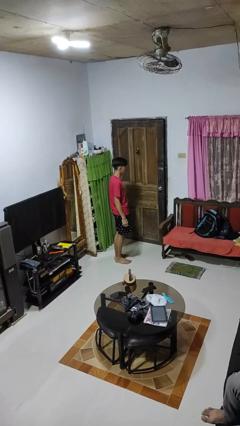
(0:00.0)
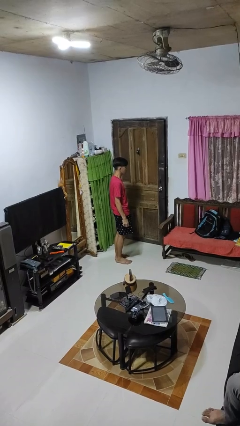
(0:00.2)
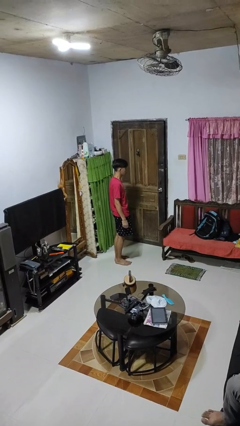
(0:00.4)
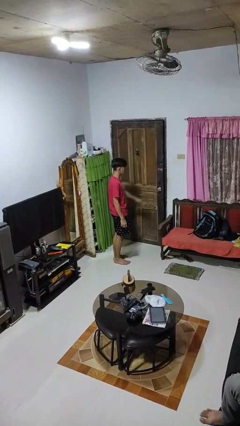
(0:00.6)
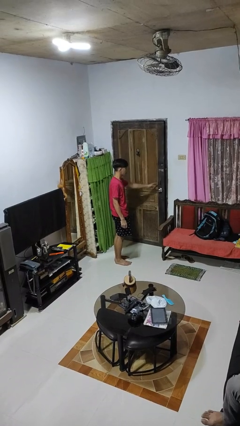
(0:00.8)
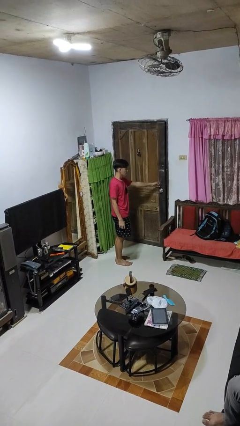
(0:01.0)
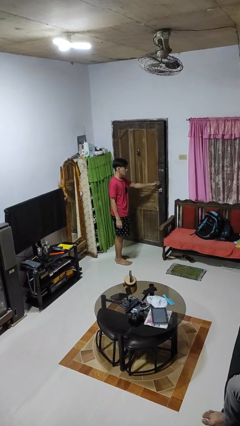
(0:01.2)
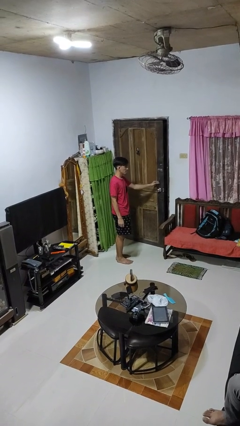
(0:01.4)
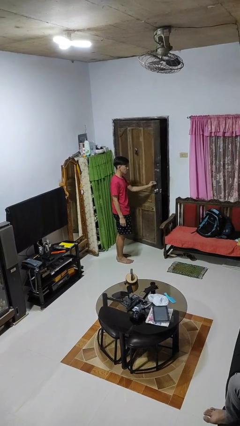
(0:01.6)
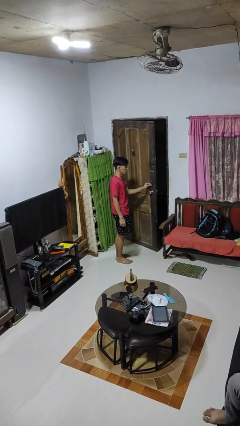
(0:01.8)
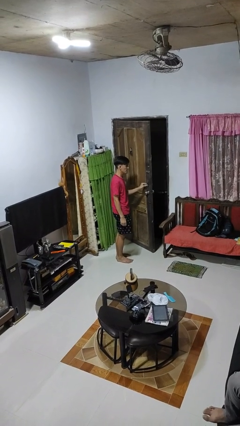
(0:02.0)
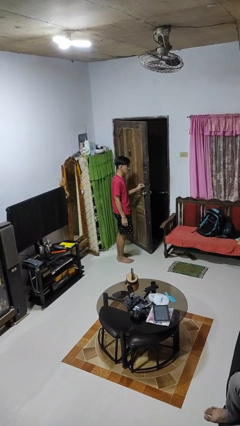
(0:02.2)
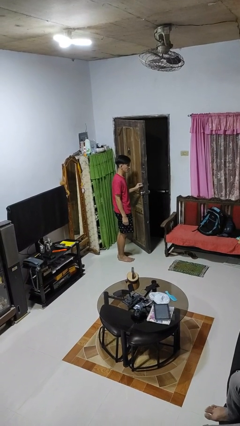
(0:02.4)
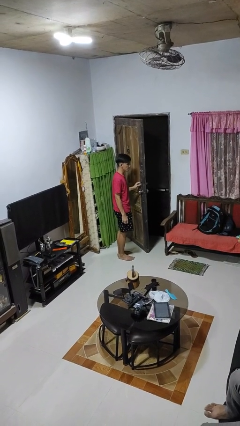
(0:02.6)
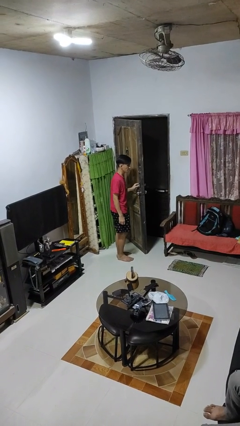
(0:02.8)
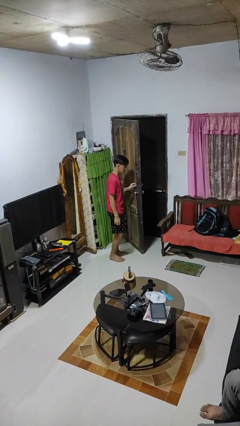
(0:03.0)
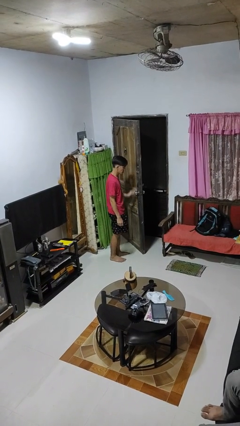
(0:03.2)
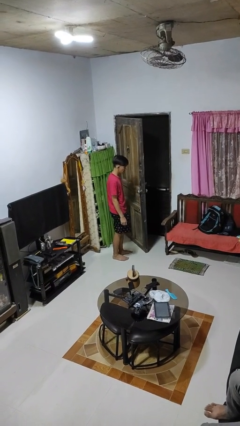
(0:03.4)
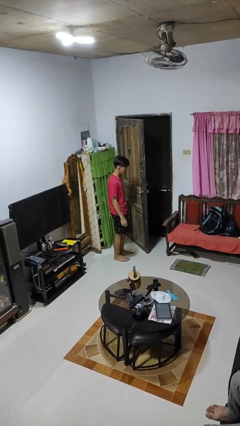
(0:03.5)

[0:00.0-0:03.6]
person opens facility door

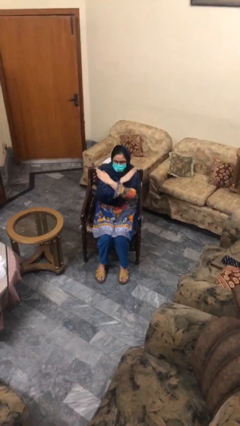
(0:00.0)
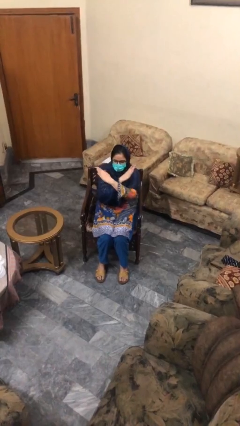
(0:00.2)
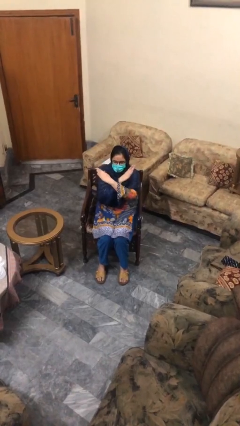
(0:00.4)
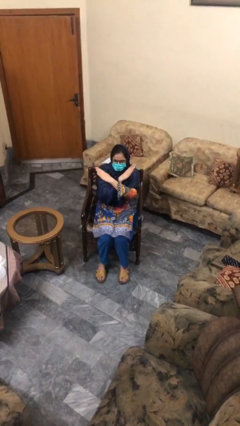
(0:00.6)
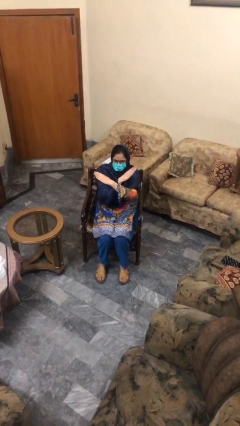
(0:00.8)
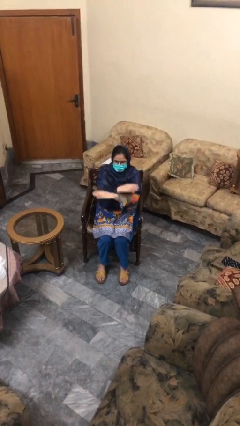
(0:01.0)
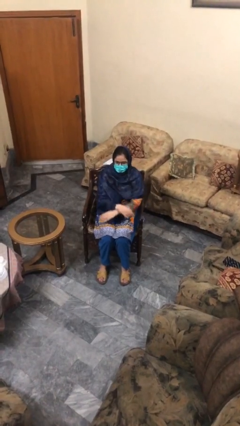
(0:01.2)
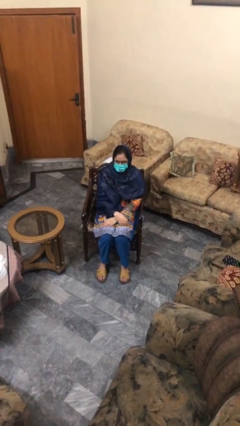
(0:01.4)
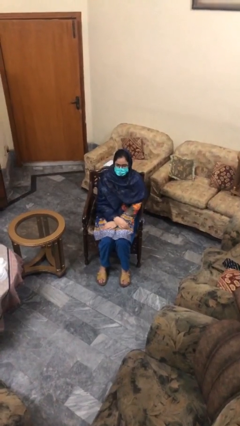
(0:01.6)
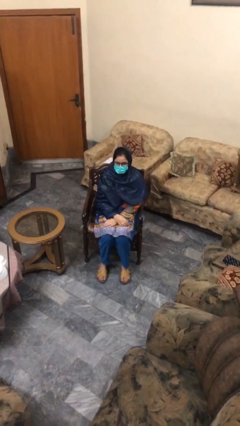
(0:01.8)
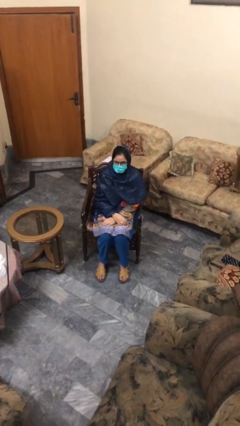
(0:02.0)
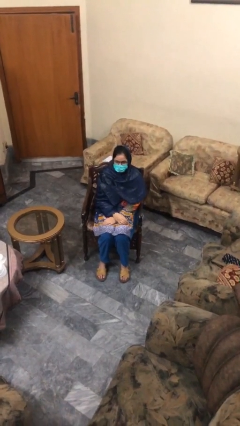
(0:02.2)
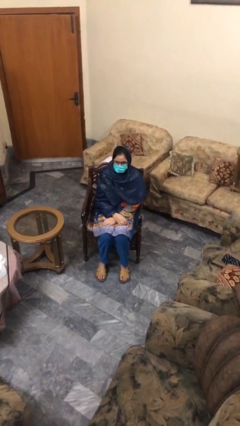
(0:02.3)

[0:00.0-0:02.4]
person gestures arms x

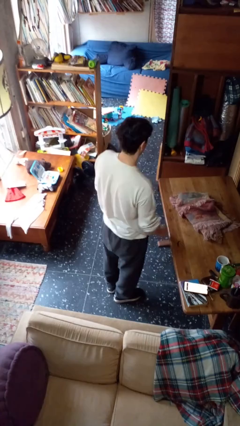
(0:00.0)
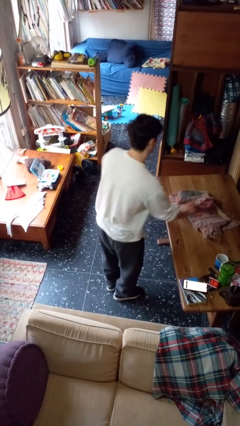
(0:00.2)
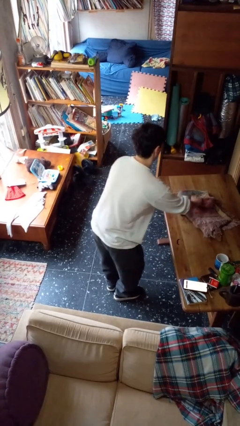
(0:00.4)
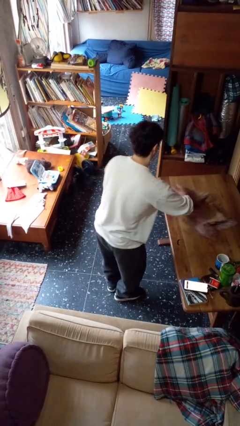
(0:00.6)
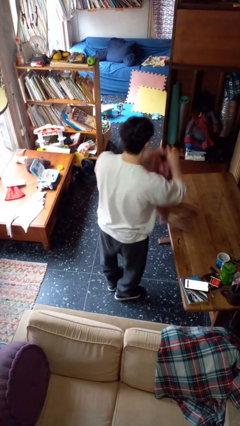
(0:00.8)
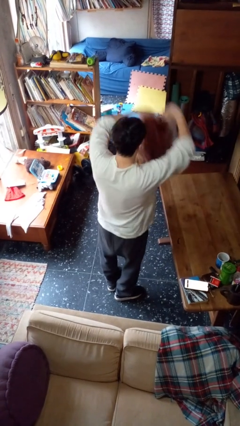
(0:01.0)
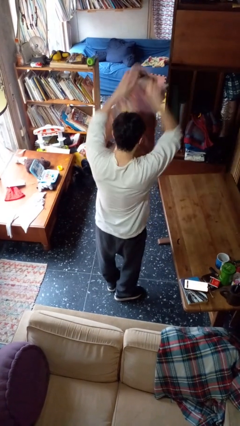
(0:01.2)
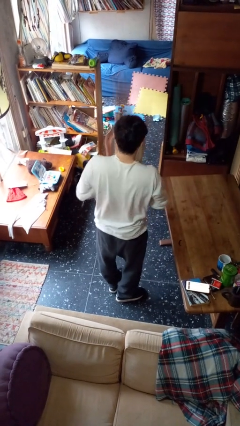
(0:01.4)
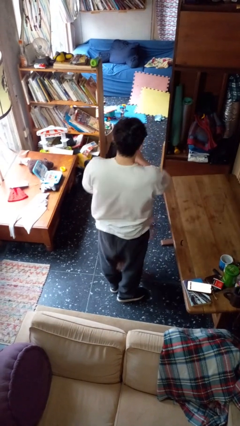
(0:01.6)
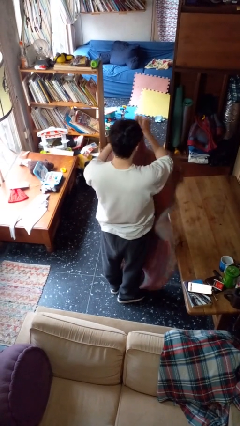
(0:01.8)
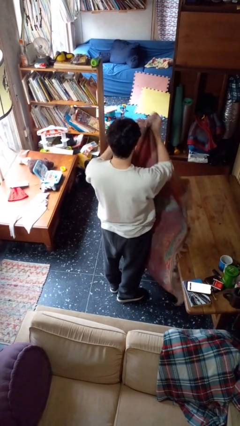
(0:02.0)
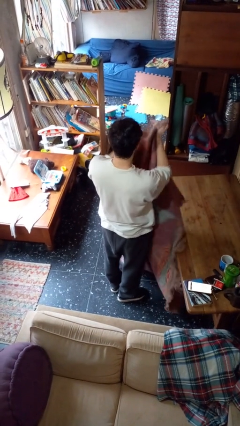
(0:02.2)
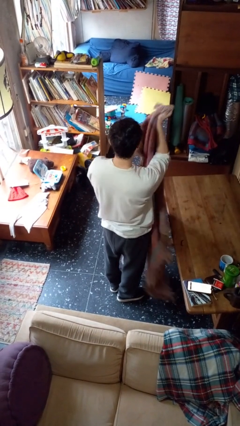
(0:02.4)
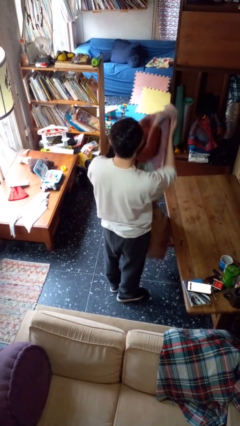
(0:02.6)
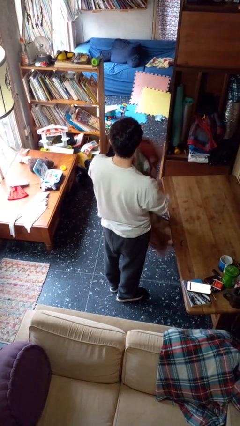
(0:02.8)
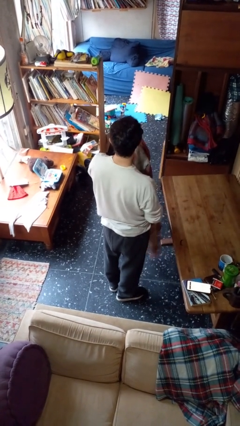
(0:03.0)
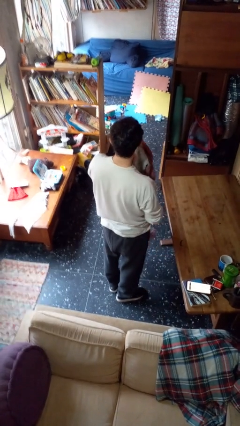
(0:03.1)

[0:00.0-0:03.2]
person unfolds blanket

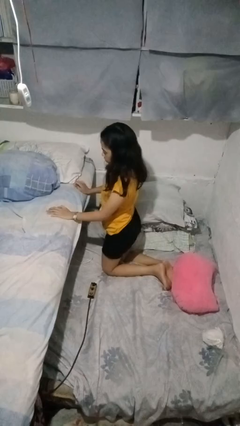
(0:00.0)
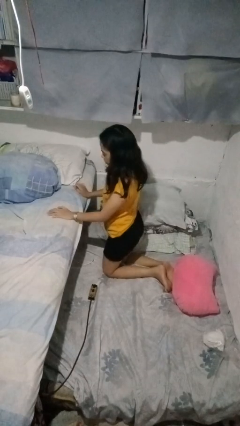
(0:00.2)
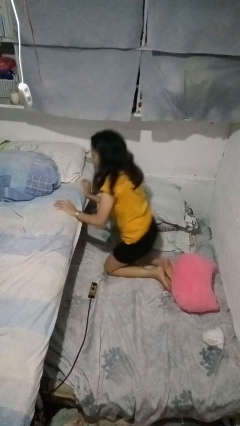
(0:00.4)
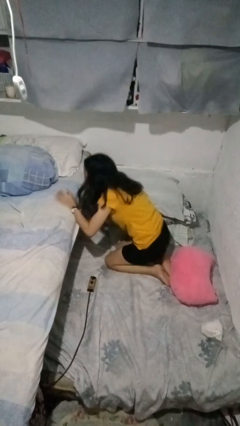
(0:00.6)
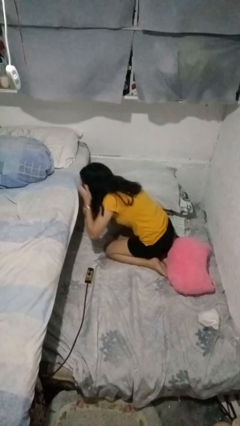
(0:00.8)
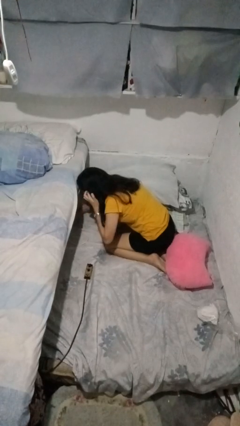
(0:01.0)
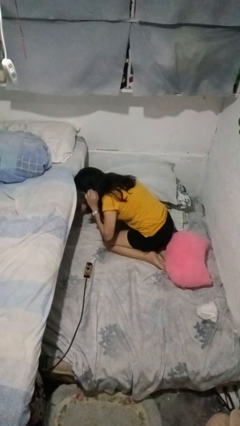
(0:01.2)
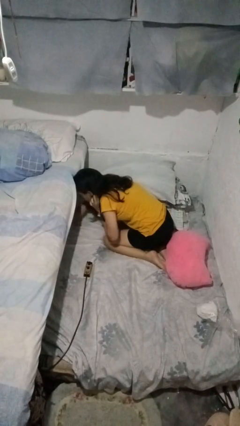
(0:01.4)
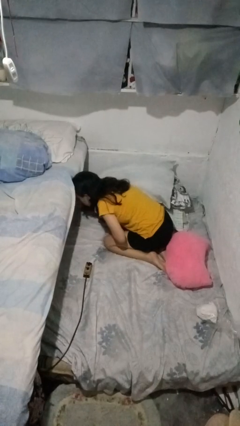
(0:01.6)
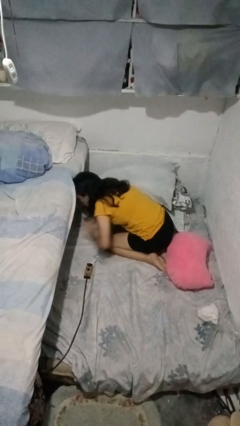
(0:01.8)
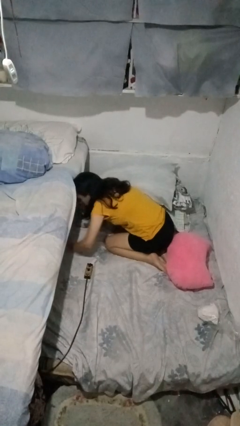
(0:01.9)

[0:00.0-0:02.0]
person searches under bed

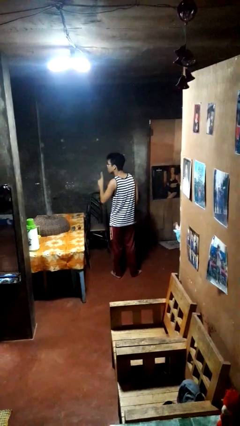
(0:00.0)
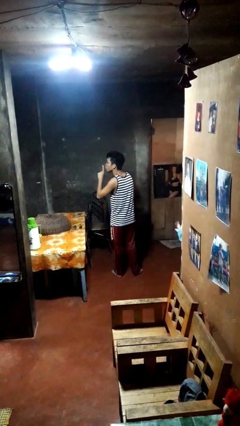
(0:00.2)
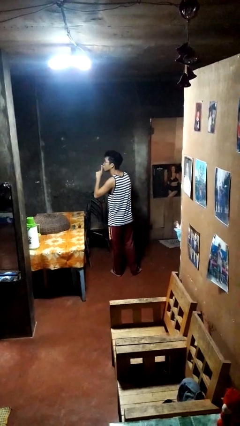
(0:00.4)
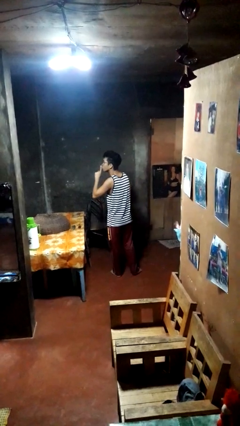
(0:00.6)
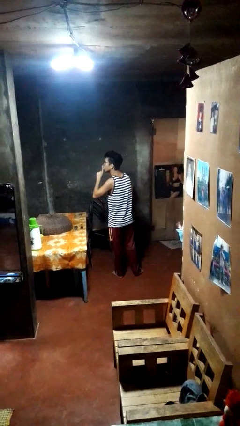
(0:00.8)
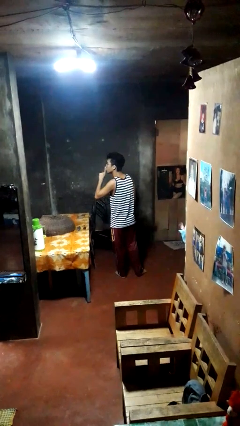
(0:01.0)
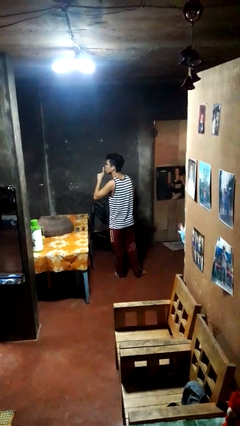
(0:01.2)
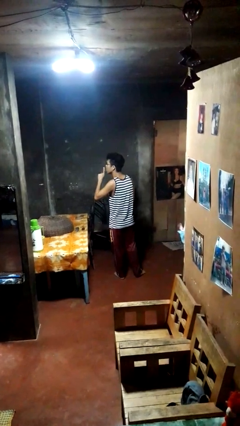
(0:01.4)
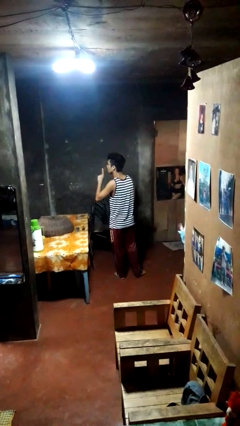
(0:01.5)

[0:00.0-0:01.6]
person gestures be quiet

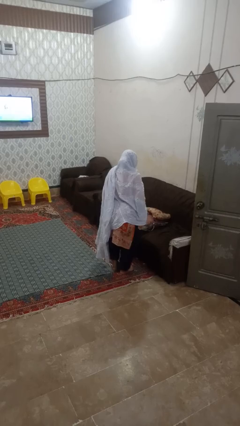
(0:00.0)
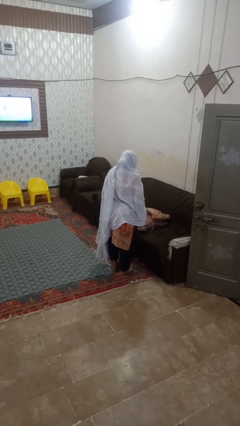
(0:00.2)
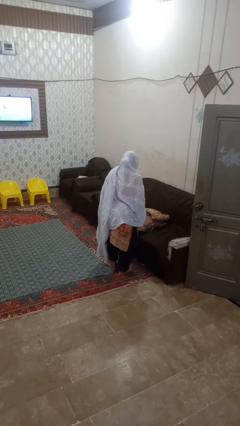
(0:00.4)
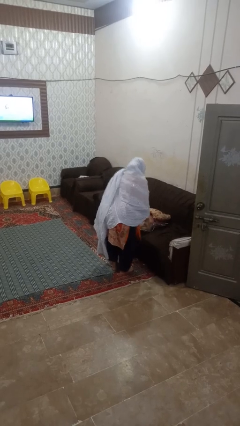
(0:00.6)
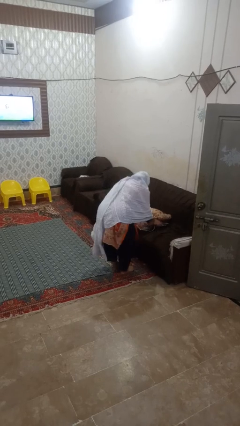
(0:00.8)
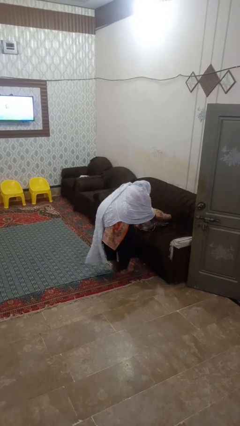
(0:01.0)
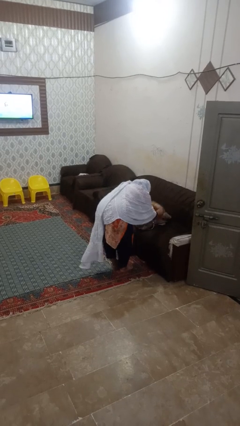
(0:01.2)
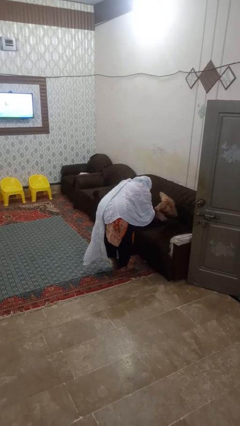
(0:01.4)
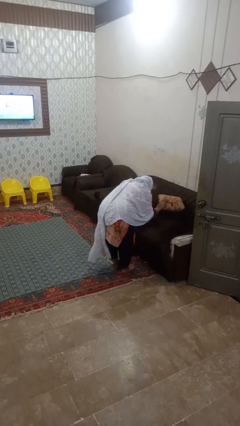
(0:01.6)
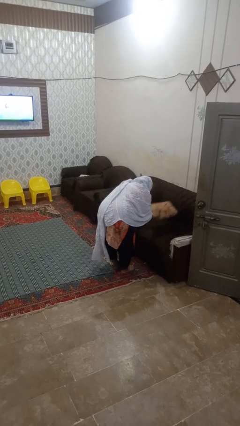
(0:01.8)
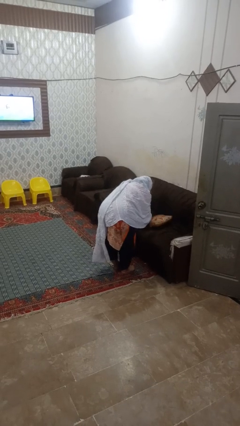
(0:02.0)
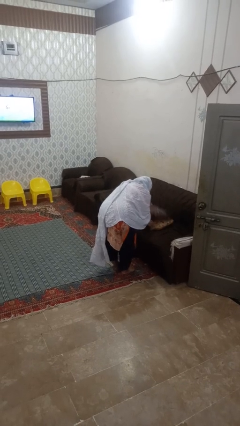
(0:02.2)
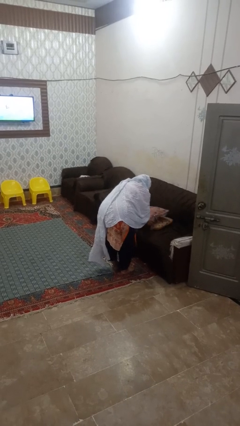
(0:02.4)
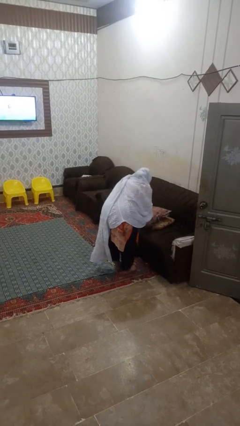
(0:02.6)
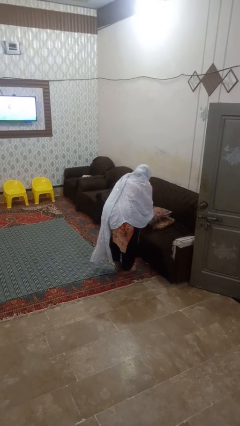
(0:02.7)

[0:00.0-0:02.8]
person searches in couch

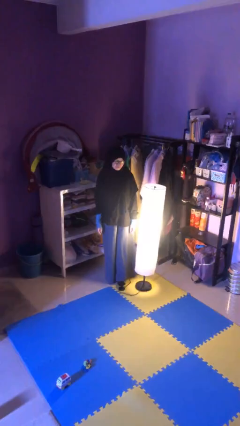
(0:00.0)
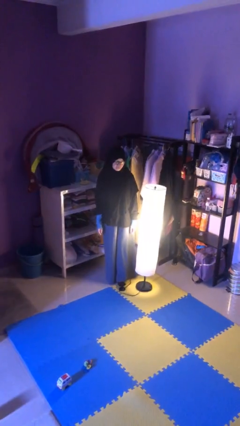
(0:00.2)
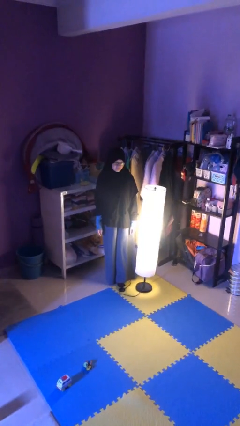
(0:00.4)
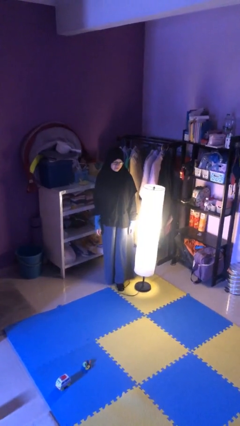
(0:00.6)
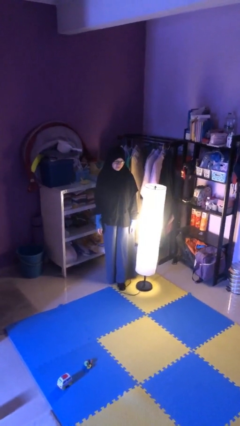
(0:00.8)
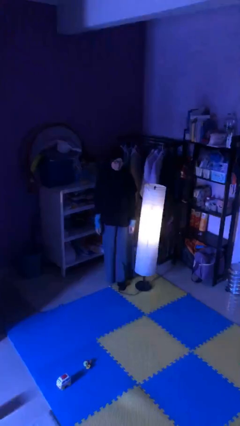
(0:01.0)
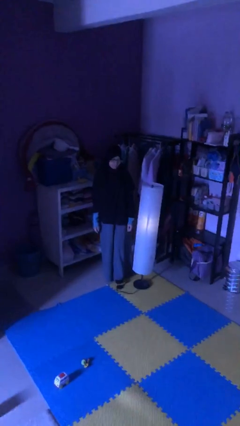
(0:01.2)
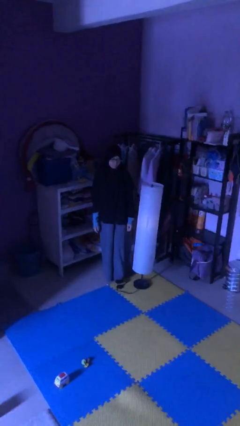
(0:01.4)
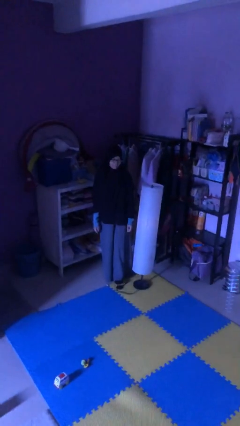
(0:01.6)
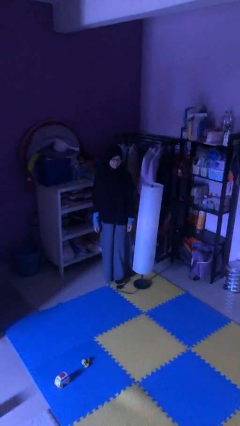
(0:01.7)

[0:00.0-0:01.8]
person turns off lamp
